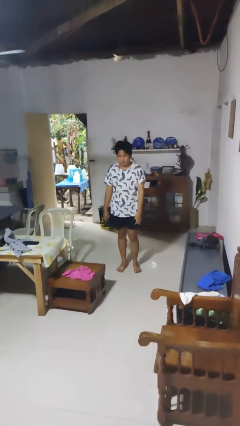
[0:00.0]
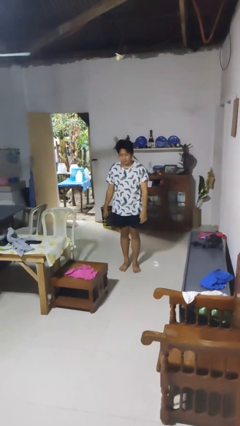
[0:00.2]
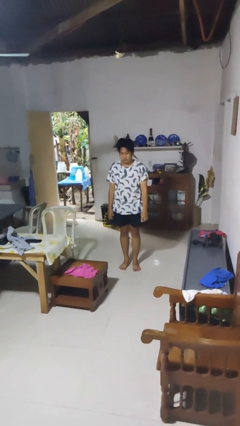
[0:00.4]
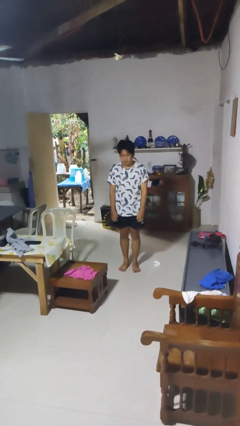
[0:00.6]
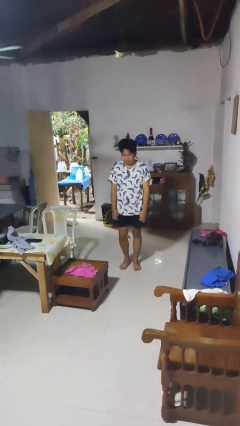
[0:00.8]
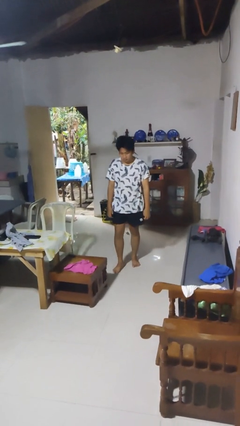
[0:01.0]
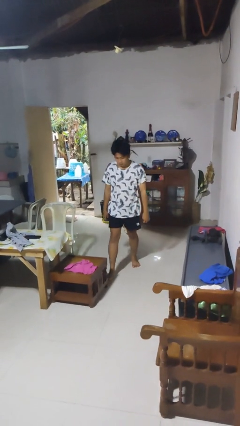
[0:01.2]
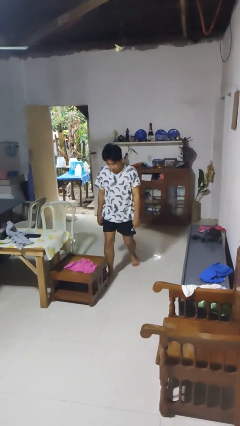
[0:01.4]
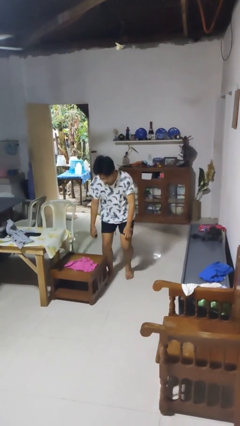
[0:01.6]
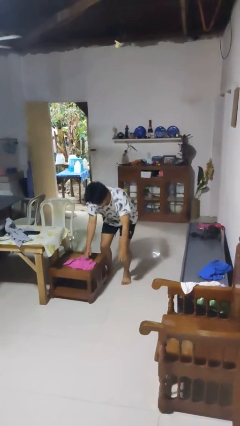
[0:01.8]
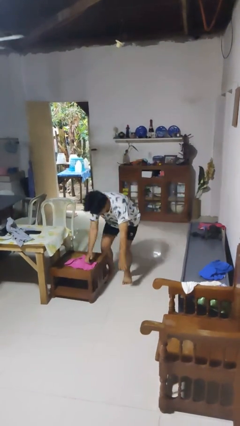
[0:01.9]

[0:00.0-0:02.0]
person trips on object on floor

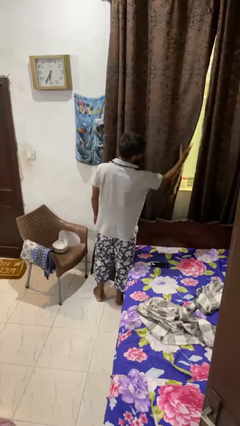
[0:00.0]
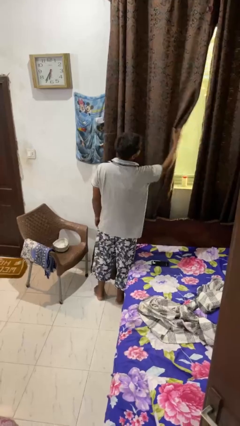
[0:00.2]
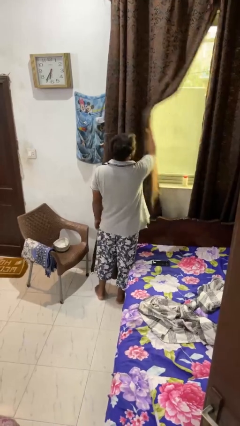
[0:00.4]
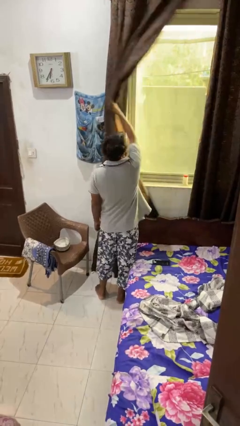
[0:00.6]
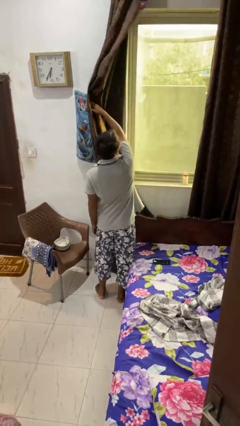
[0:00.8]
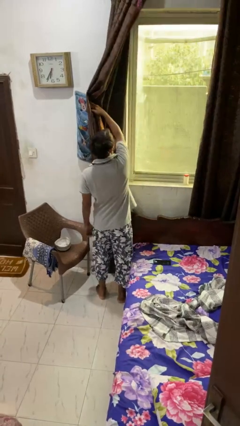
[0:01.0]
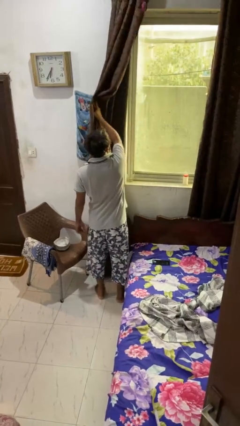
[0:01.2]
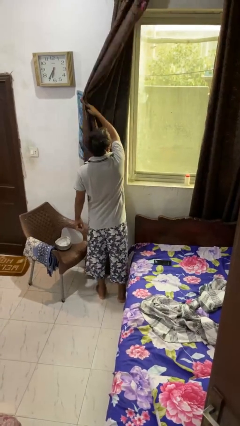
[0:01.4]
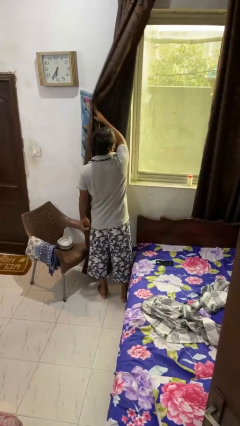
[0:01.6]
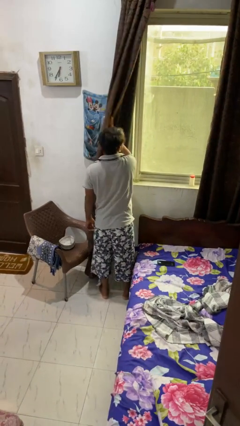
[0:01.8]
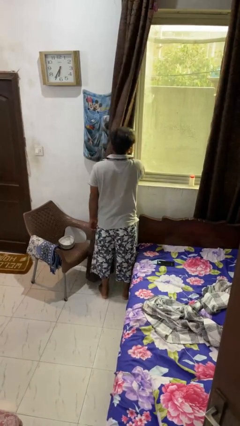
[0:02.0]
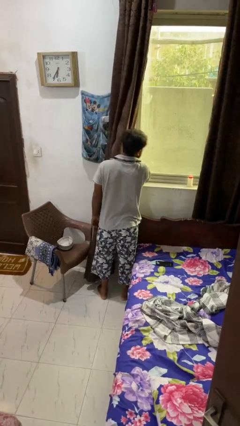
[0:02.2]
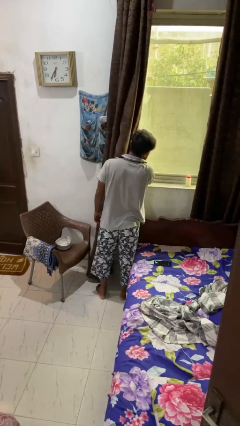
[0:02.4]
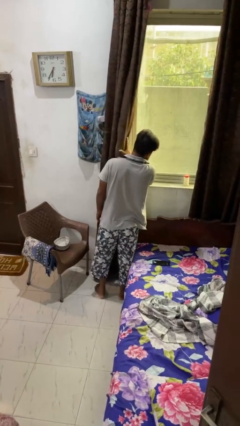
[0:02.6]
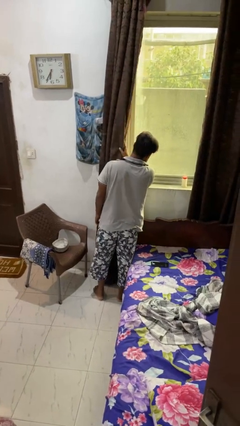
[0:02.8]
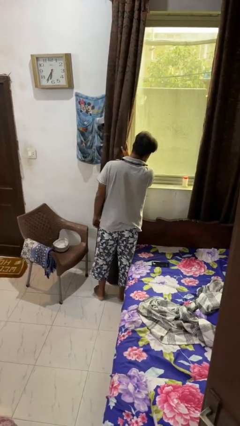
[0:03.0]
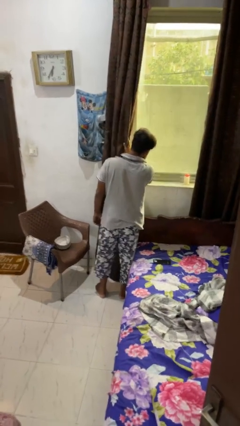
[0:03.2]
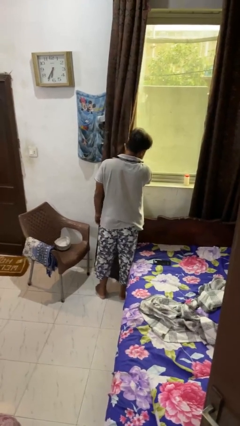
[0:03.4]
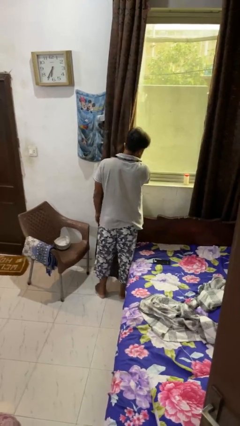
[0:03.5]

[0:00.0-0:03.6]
person opens curtains

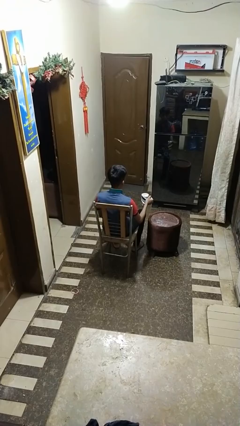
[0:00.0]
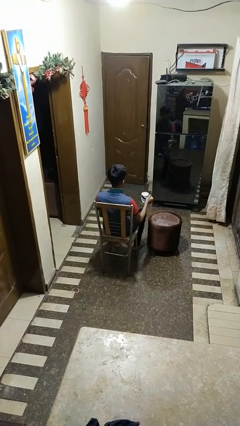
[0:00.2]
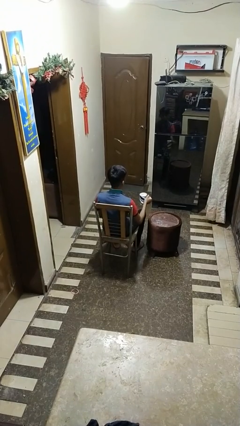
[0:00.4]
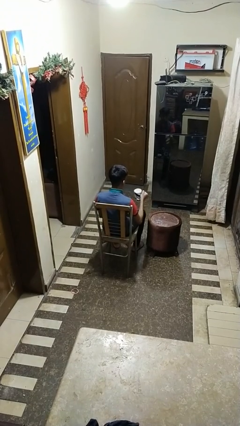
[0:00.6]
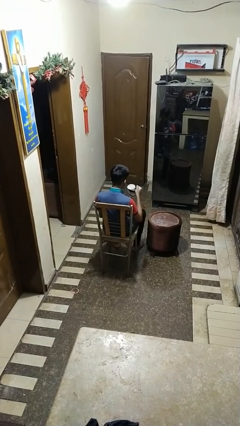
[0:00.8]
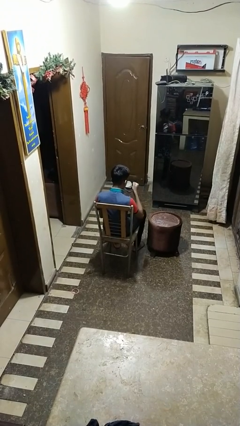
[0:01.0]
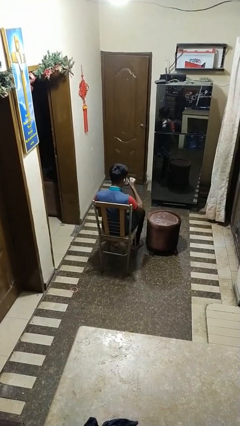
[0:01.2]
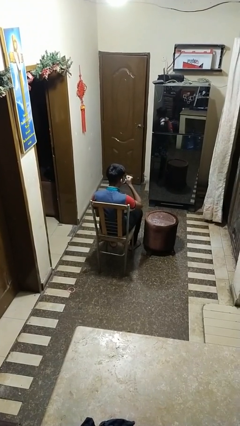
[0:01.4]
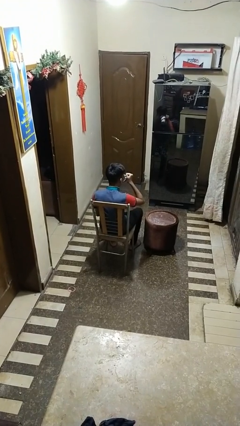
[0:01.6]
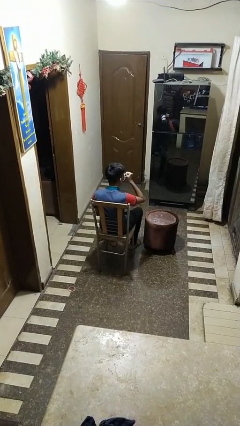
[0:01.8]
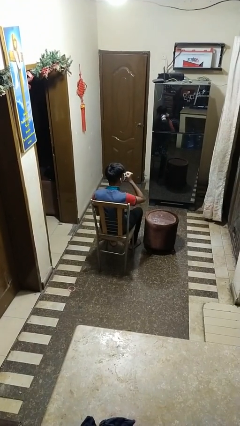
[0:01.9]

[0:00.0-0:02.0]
person drinks from mug

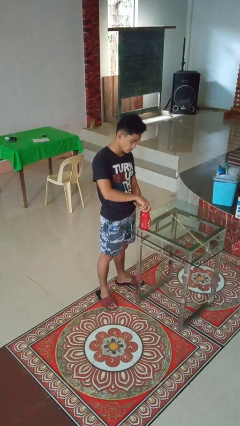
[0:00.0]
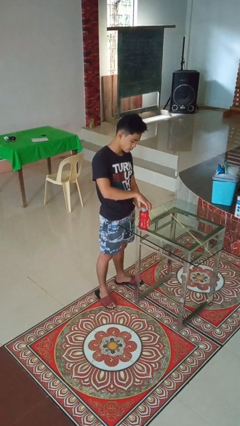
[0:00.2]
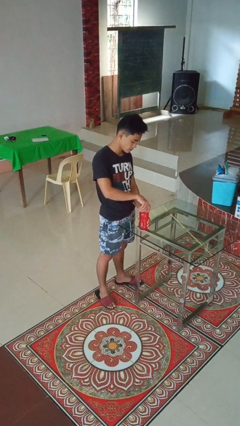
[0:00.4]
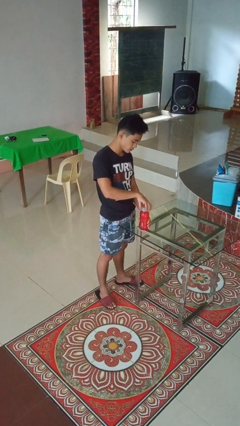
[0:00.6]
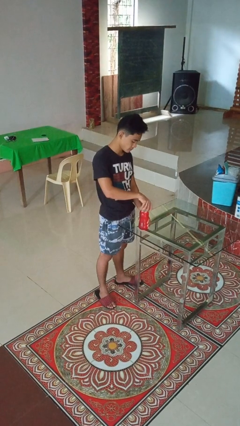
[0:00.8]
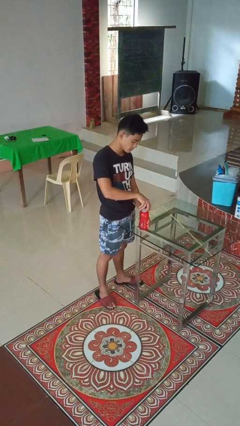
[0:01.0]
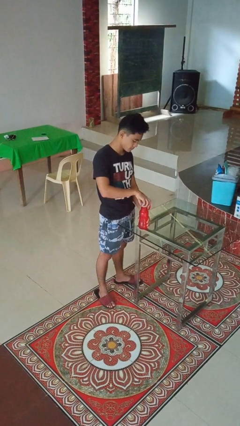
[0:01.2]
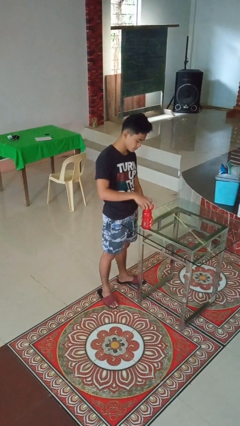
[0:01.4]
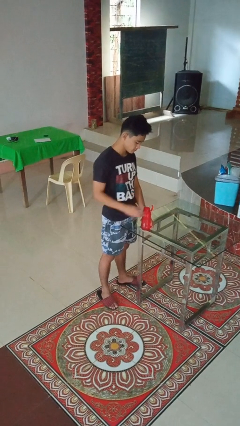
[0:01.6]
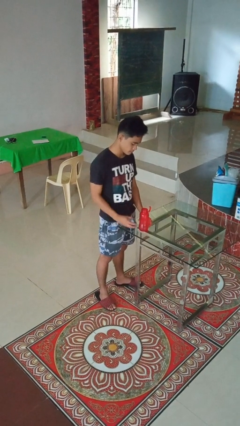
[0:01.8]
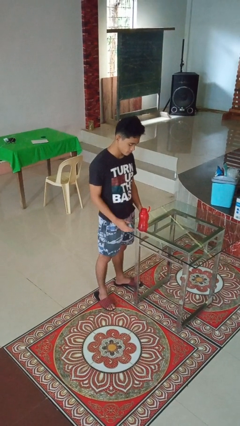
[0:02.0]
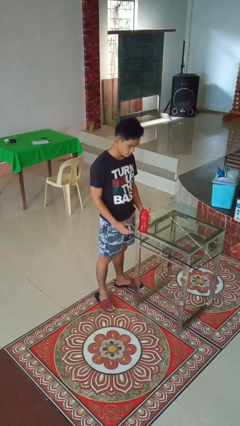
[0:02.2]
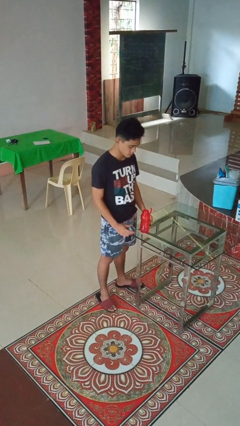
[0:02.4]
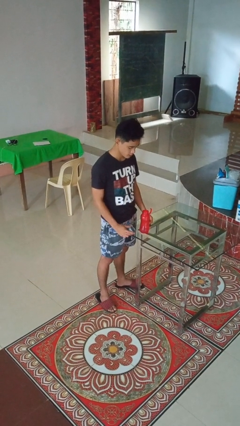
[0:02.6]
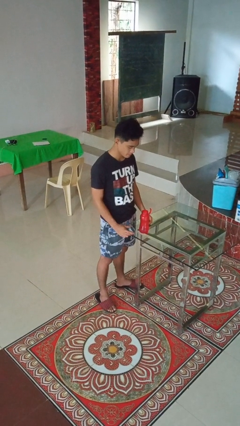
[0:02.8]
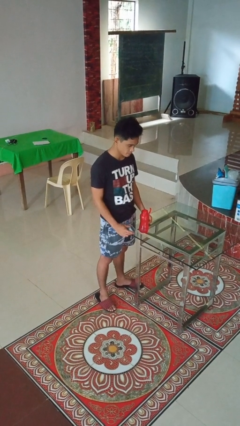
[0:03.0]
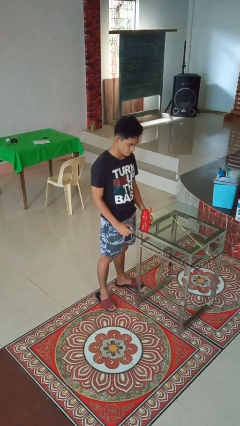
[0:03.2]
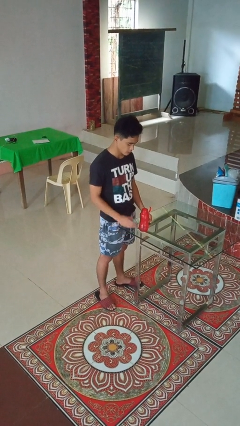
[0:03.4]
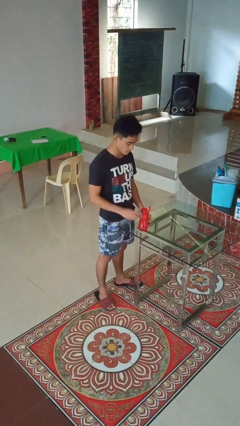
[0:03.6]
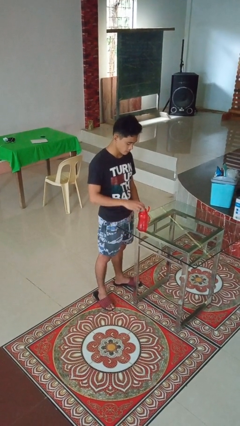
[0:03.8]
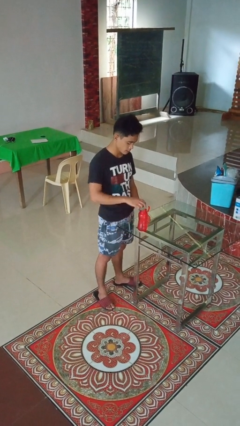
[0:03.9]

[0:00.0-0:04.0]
person unscrews lid from bottle

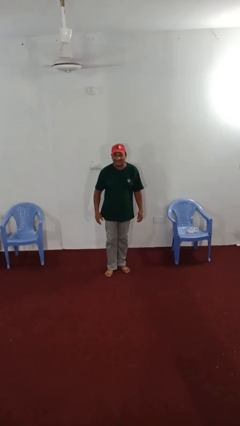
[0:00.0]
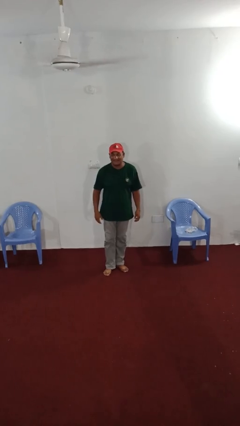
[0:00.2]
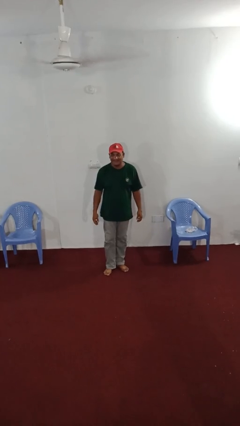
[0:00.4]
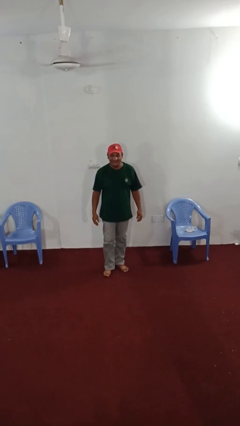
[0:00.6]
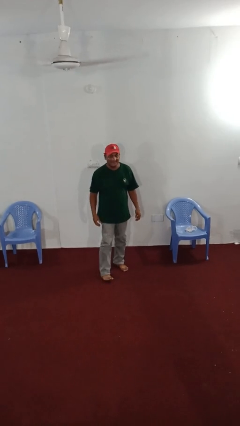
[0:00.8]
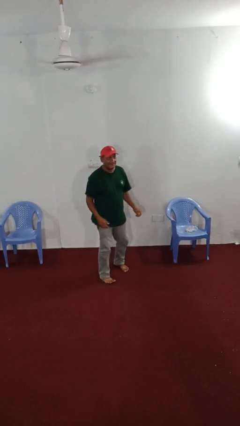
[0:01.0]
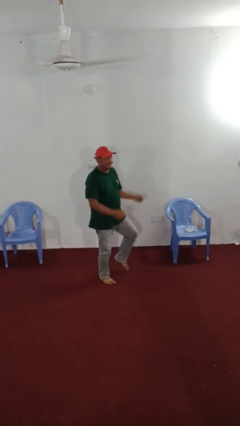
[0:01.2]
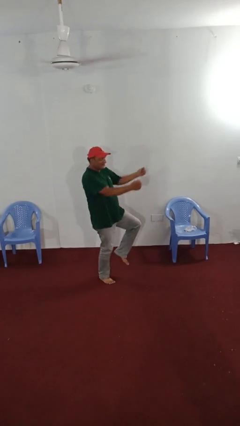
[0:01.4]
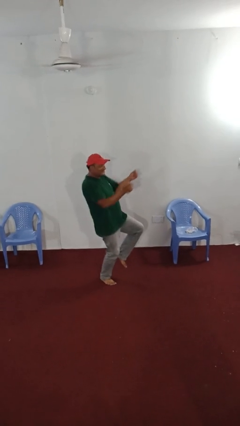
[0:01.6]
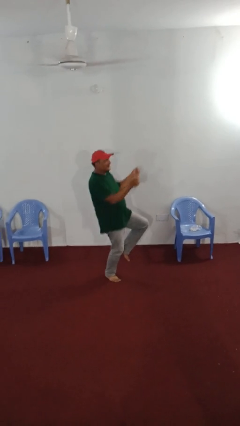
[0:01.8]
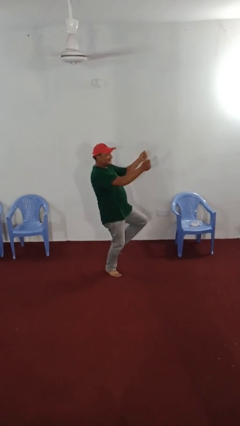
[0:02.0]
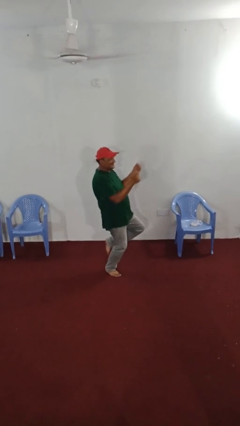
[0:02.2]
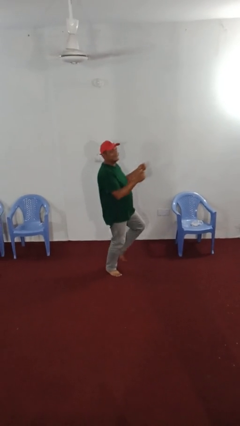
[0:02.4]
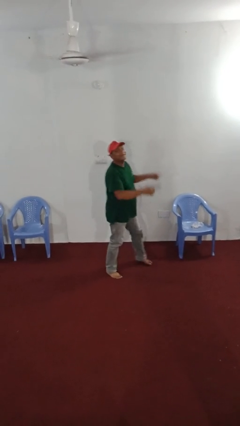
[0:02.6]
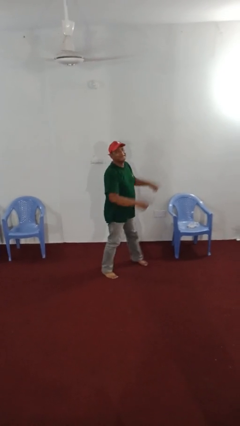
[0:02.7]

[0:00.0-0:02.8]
person dances in place

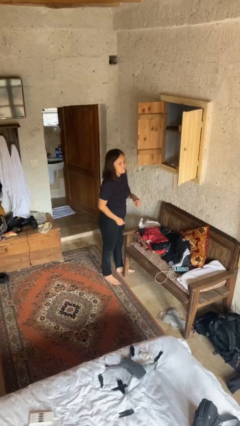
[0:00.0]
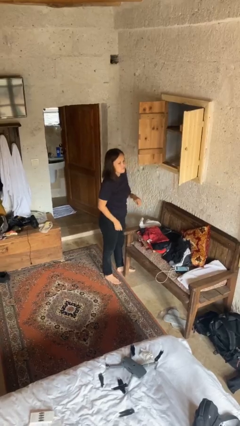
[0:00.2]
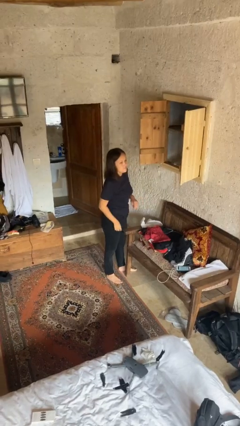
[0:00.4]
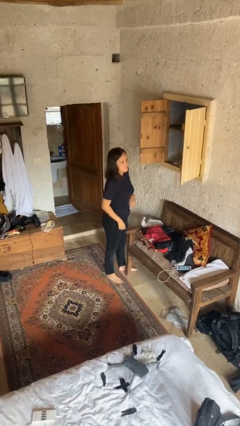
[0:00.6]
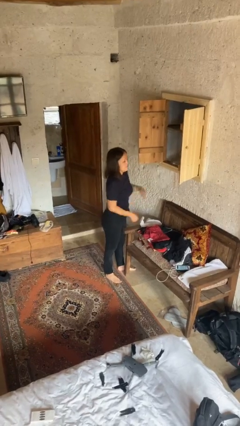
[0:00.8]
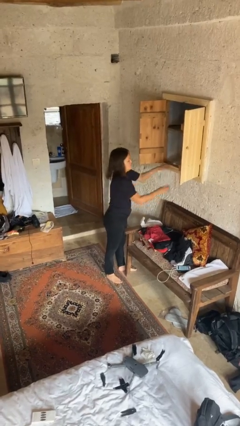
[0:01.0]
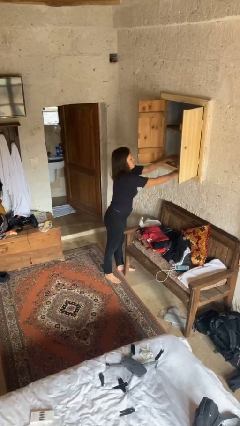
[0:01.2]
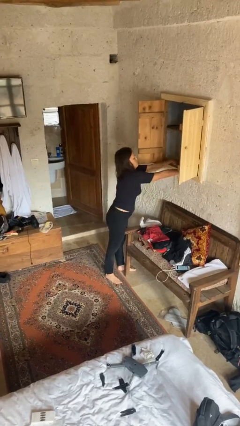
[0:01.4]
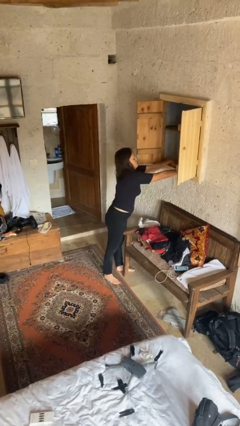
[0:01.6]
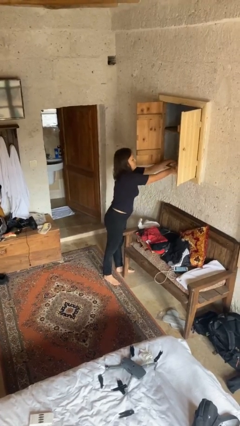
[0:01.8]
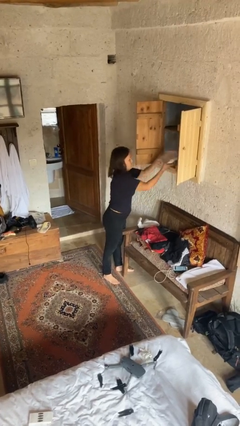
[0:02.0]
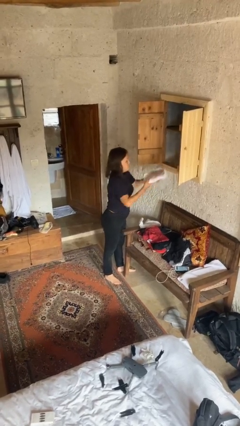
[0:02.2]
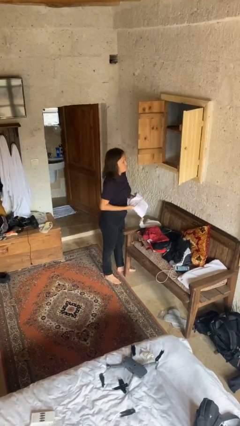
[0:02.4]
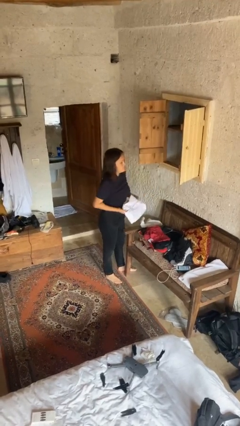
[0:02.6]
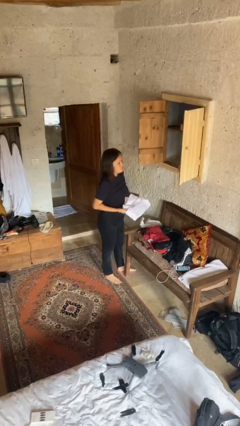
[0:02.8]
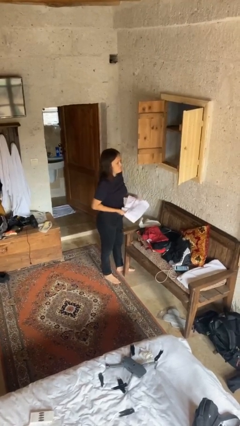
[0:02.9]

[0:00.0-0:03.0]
person takes clothes from dresser
